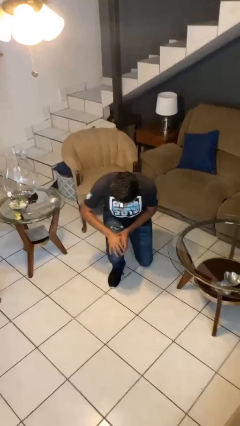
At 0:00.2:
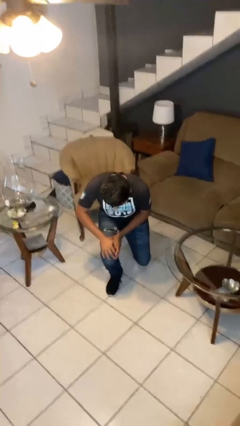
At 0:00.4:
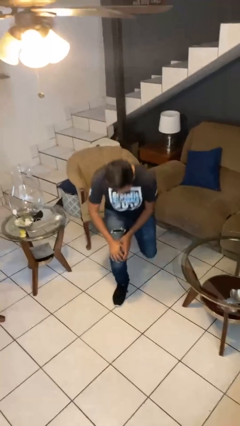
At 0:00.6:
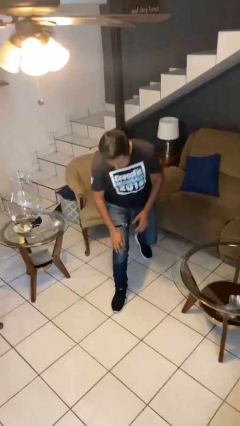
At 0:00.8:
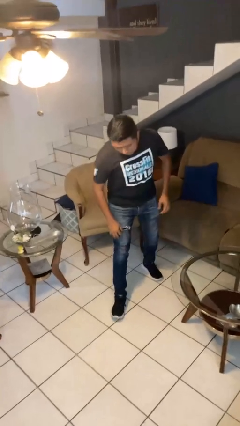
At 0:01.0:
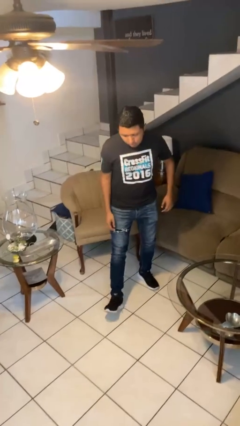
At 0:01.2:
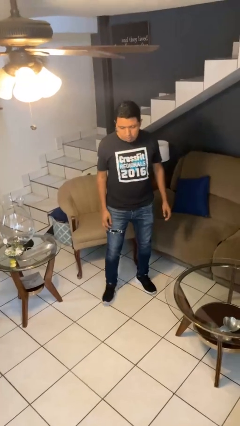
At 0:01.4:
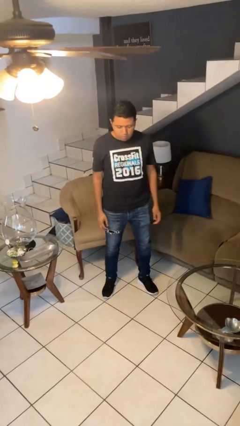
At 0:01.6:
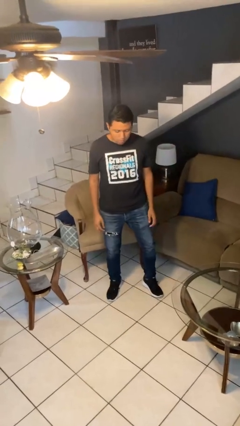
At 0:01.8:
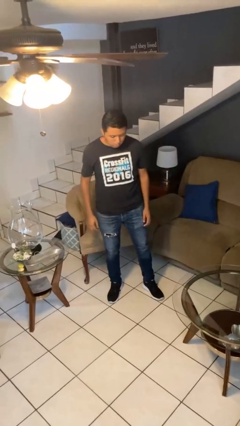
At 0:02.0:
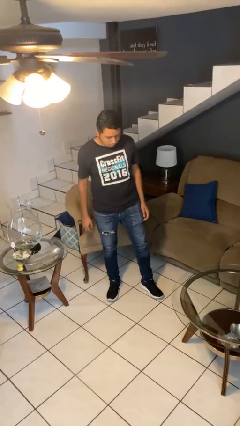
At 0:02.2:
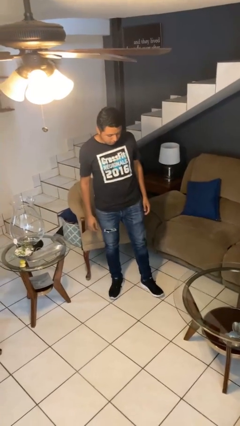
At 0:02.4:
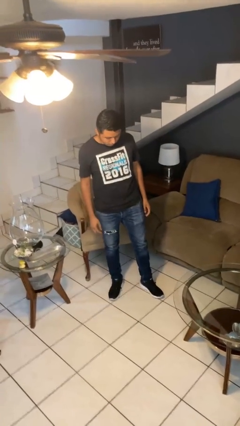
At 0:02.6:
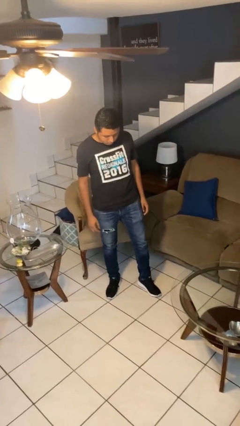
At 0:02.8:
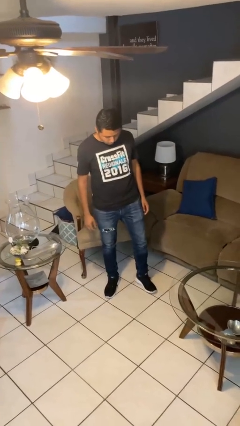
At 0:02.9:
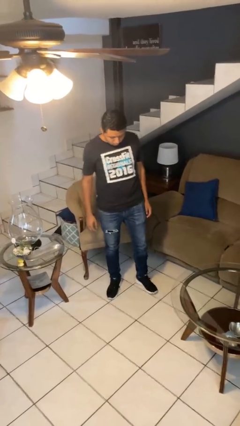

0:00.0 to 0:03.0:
person stands up from floor

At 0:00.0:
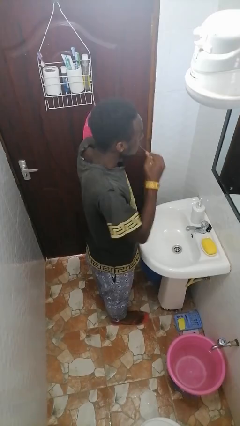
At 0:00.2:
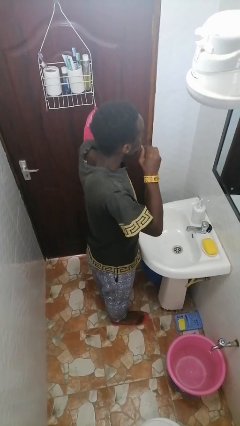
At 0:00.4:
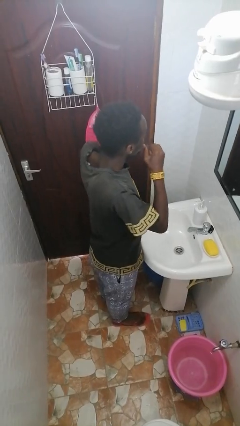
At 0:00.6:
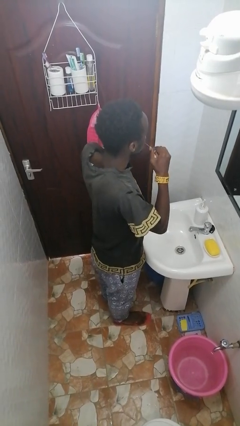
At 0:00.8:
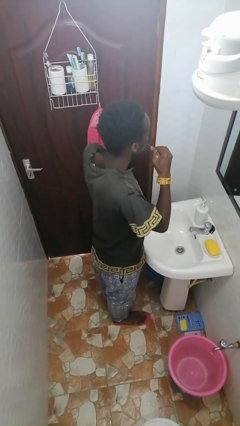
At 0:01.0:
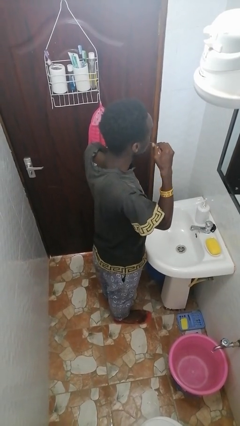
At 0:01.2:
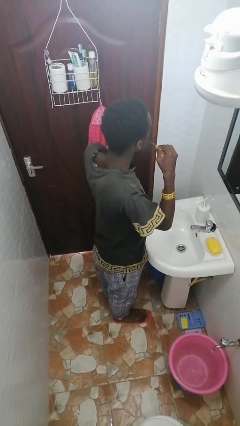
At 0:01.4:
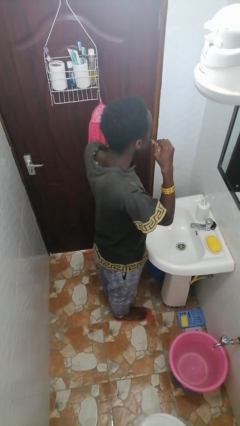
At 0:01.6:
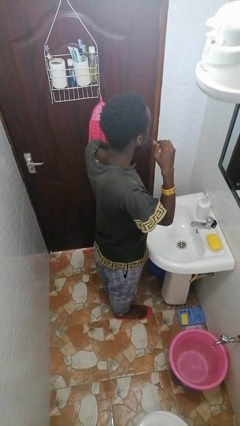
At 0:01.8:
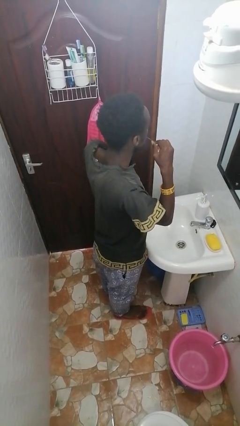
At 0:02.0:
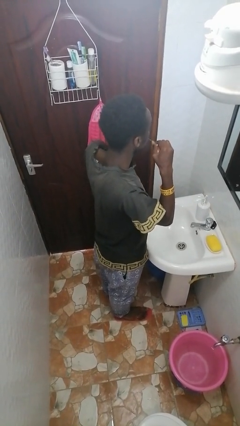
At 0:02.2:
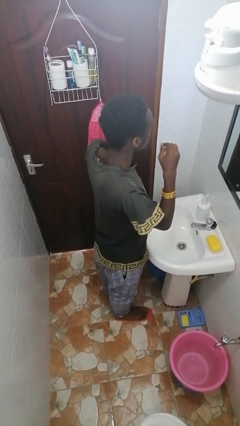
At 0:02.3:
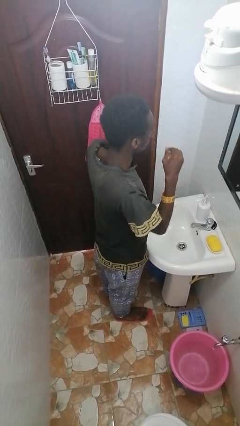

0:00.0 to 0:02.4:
person flosses

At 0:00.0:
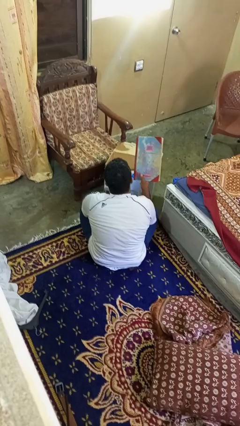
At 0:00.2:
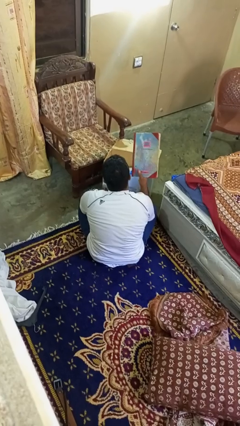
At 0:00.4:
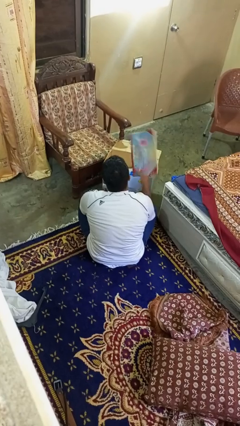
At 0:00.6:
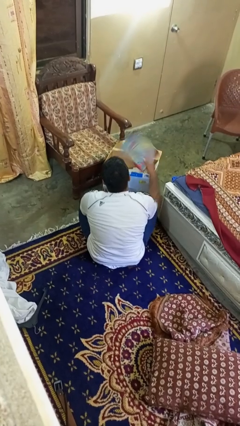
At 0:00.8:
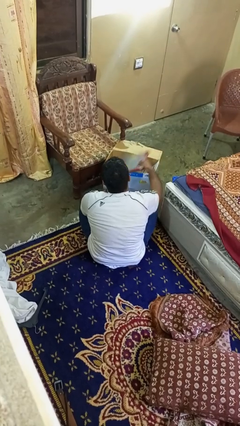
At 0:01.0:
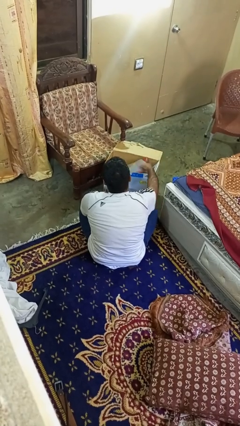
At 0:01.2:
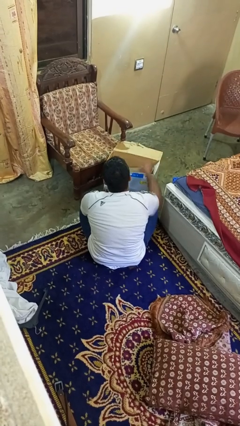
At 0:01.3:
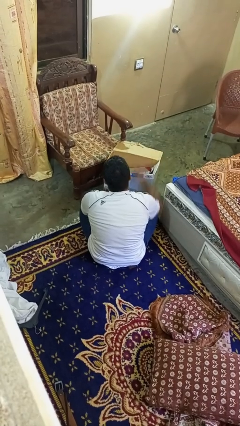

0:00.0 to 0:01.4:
person puts object into box

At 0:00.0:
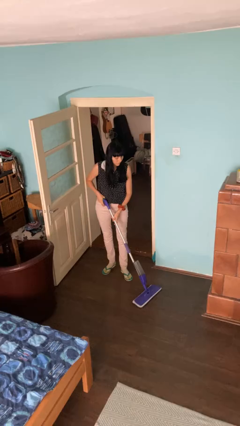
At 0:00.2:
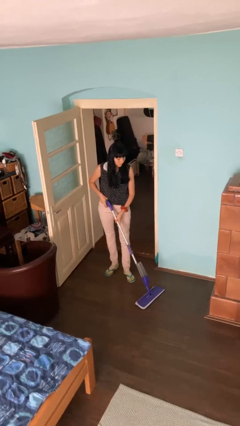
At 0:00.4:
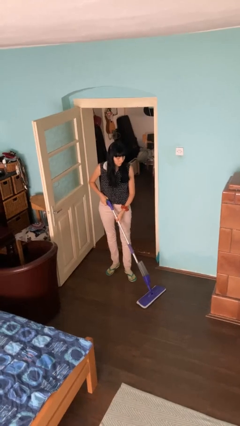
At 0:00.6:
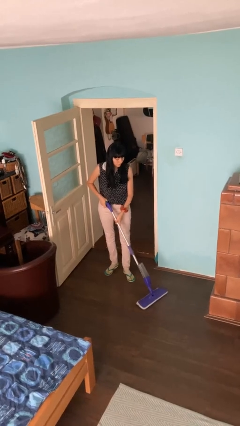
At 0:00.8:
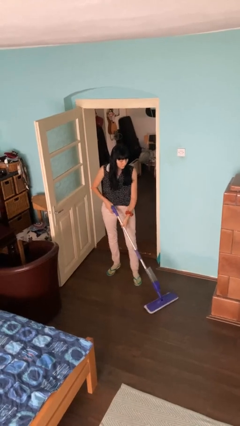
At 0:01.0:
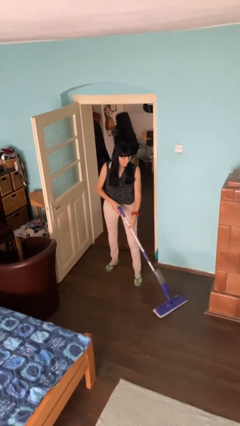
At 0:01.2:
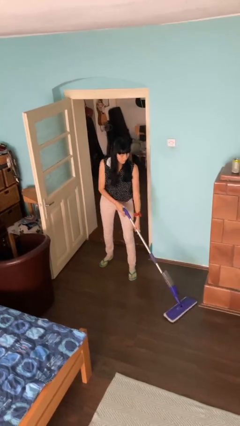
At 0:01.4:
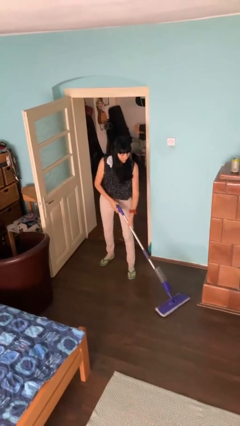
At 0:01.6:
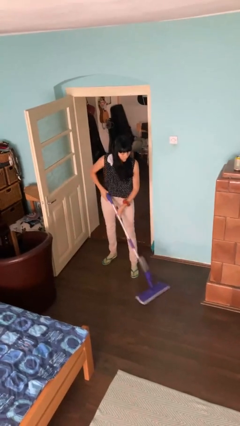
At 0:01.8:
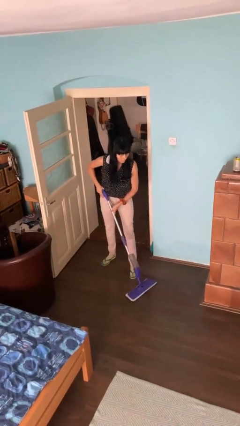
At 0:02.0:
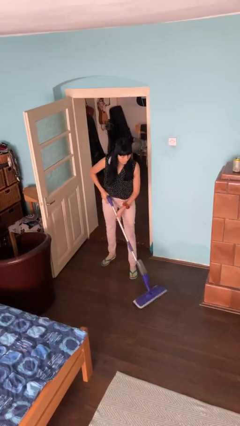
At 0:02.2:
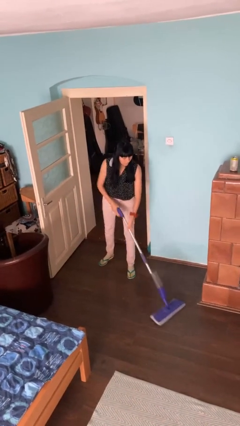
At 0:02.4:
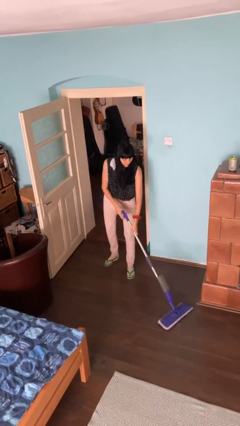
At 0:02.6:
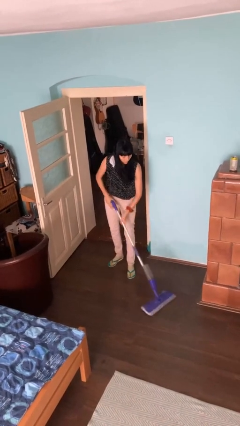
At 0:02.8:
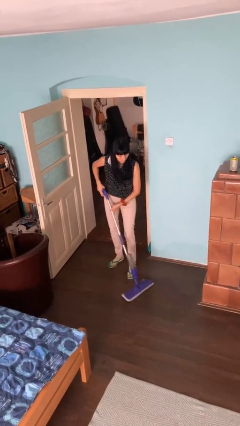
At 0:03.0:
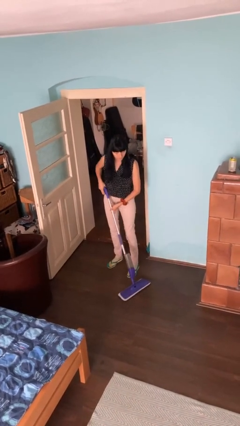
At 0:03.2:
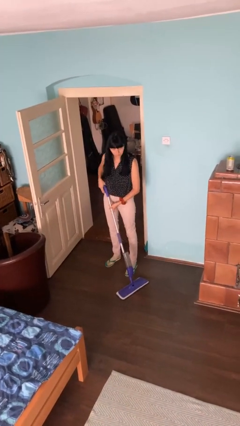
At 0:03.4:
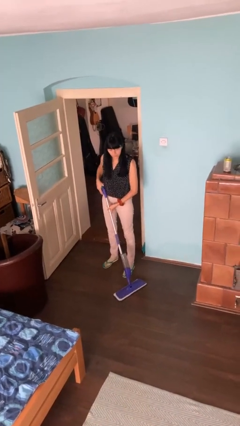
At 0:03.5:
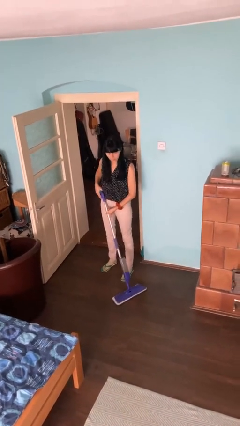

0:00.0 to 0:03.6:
person mops

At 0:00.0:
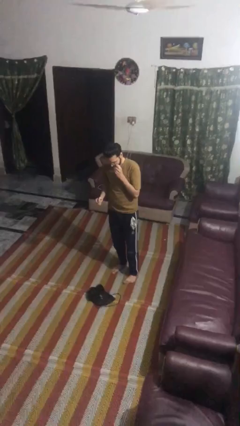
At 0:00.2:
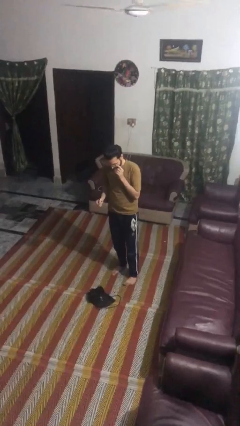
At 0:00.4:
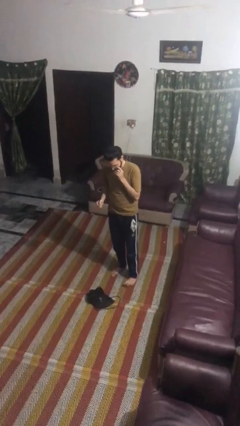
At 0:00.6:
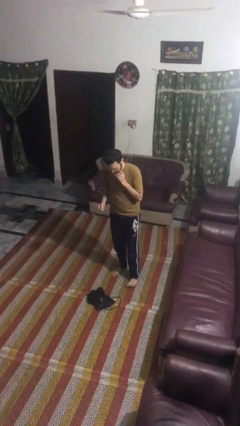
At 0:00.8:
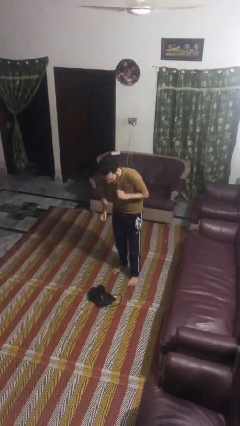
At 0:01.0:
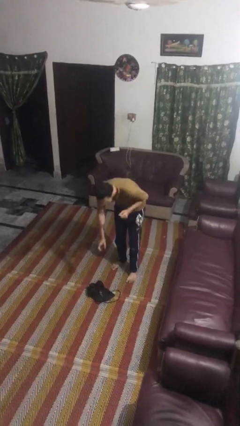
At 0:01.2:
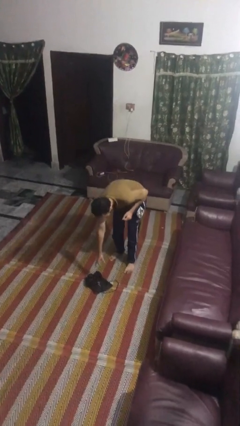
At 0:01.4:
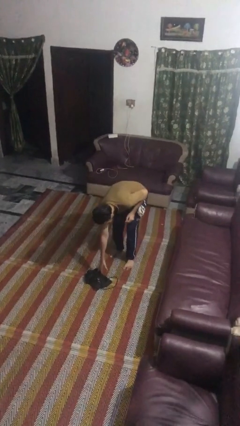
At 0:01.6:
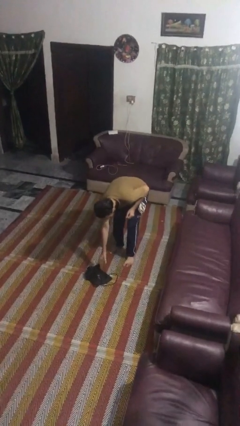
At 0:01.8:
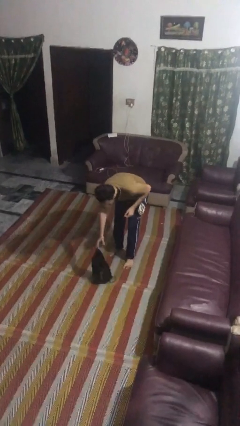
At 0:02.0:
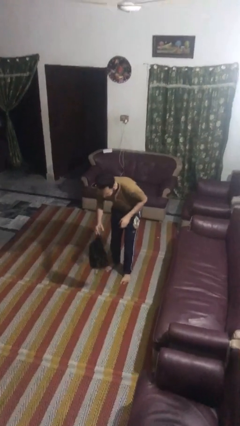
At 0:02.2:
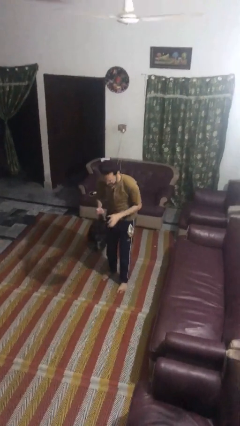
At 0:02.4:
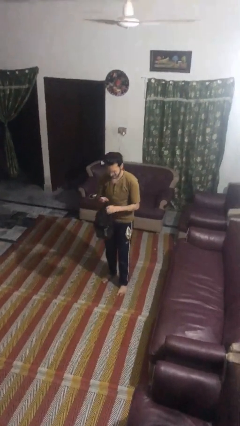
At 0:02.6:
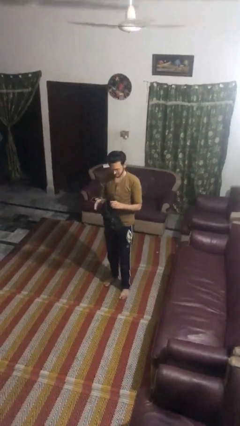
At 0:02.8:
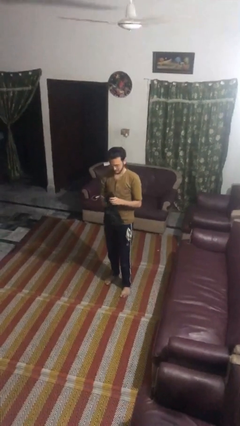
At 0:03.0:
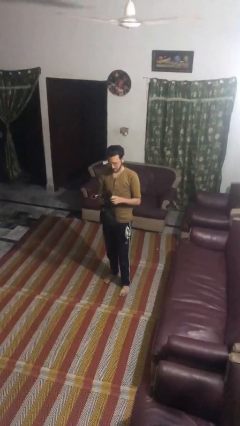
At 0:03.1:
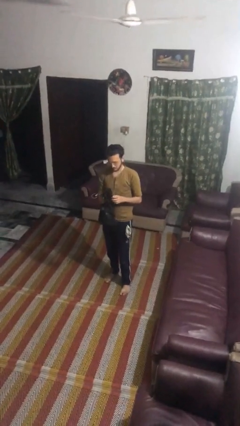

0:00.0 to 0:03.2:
person picks up object from floor

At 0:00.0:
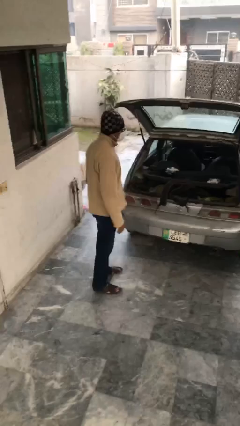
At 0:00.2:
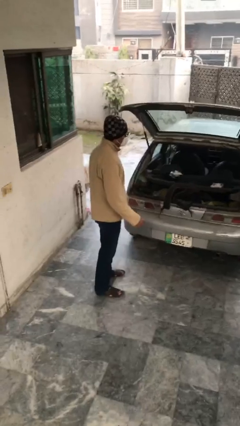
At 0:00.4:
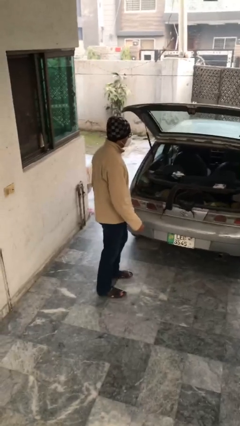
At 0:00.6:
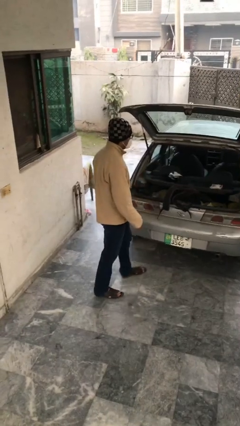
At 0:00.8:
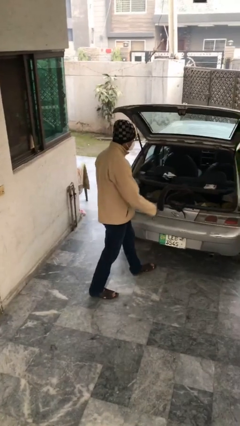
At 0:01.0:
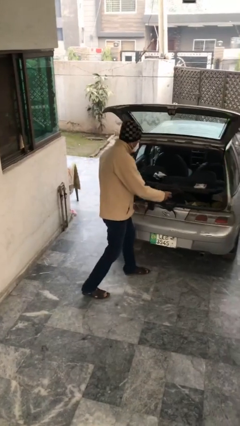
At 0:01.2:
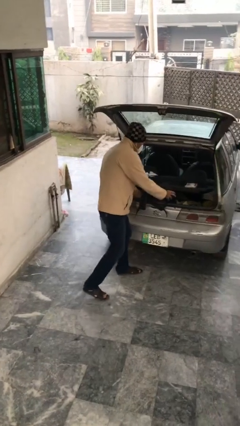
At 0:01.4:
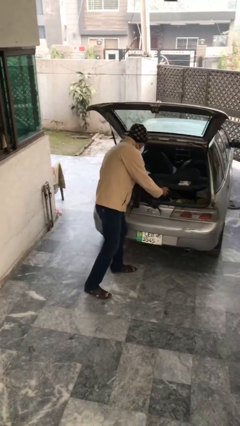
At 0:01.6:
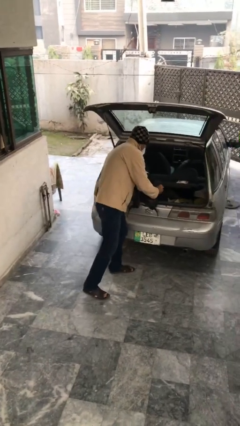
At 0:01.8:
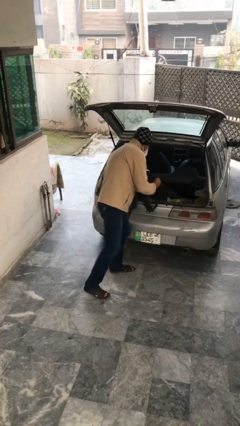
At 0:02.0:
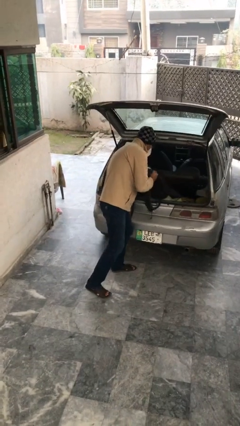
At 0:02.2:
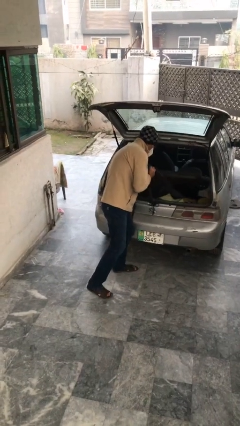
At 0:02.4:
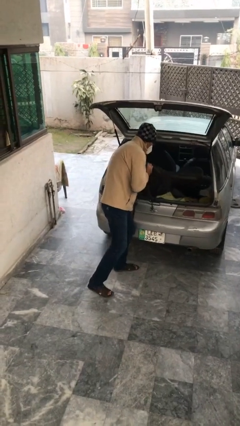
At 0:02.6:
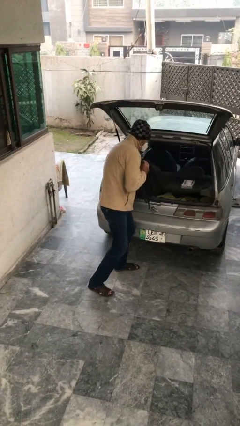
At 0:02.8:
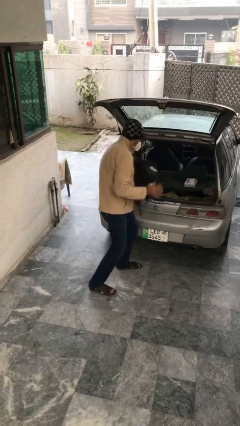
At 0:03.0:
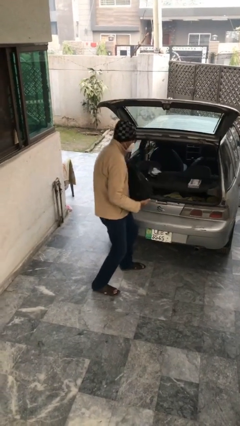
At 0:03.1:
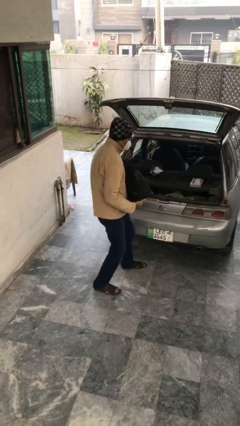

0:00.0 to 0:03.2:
person unloads car

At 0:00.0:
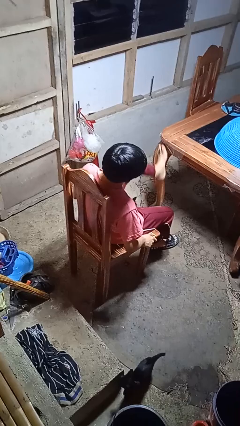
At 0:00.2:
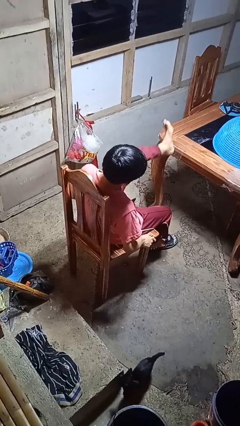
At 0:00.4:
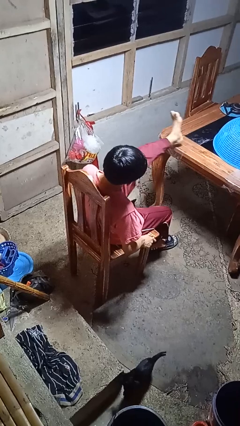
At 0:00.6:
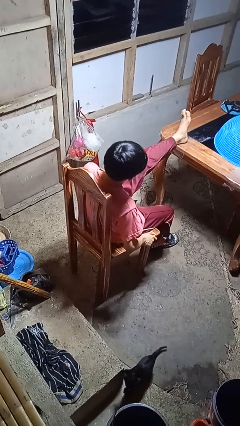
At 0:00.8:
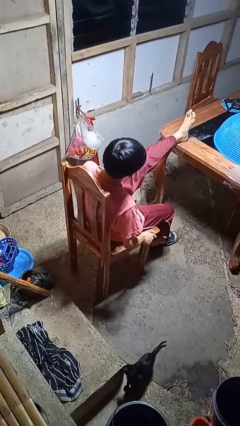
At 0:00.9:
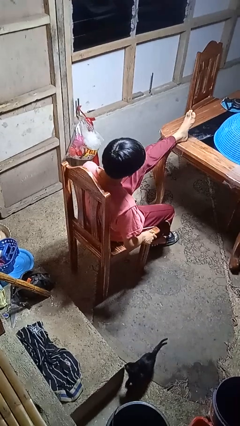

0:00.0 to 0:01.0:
person puts feet up
